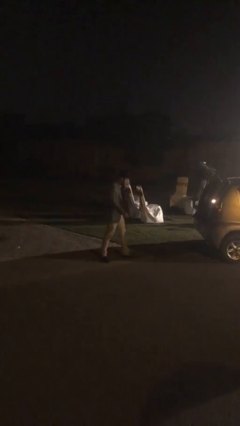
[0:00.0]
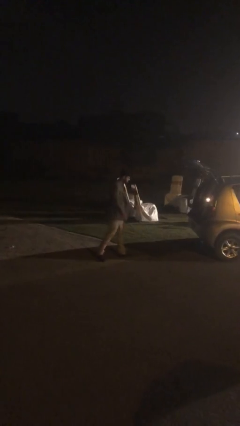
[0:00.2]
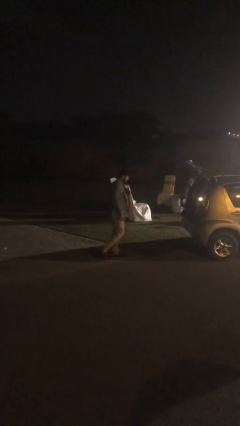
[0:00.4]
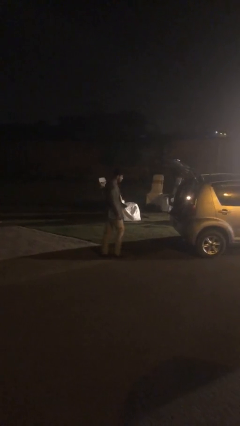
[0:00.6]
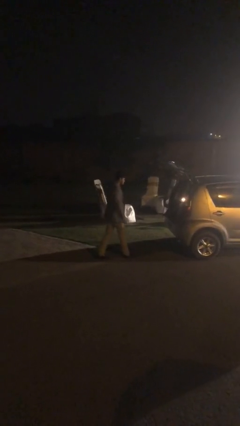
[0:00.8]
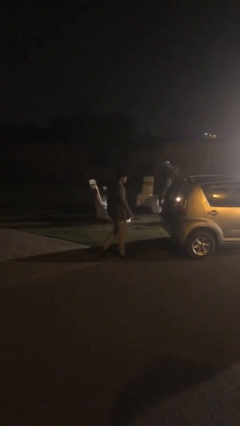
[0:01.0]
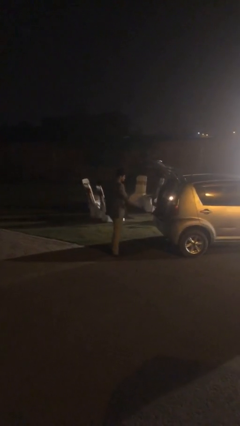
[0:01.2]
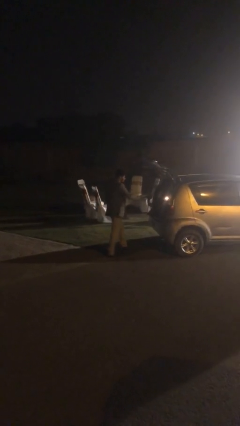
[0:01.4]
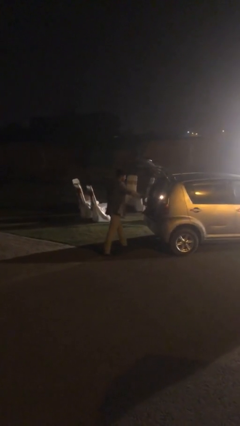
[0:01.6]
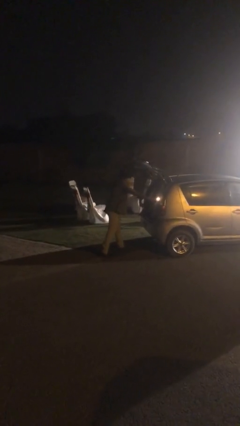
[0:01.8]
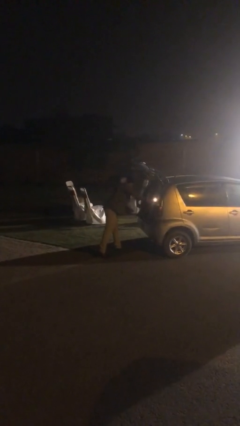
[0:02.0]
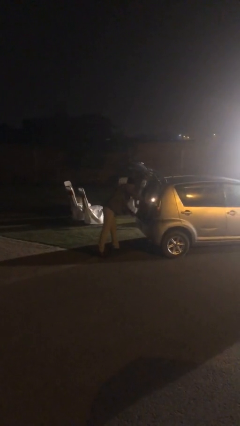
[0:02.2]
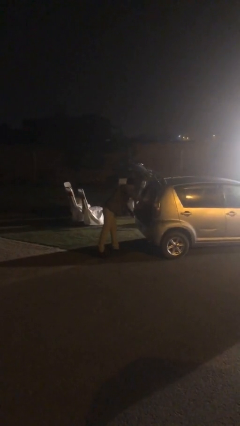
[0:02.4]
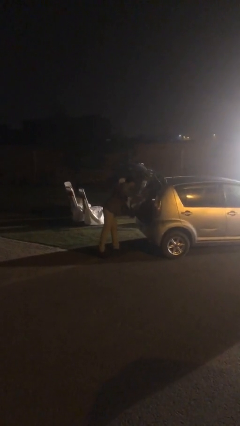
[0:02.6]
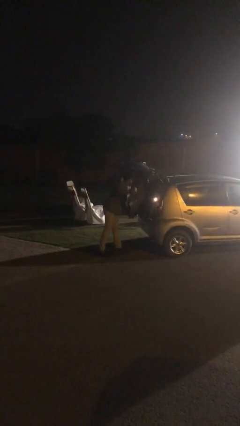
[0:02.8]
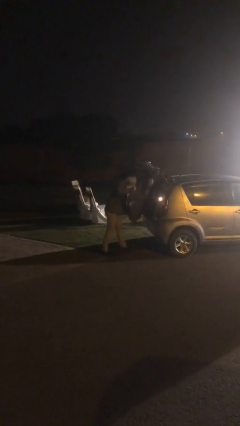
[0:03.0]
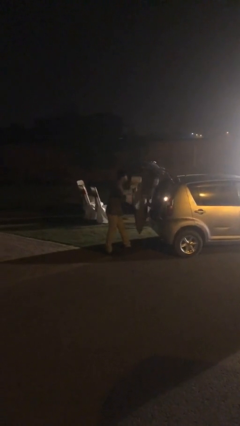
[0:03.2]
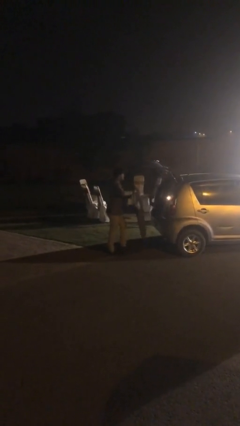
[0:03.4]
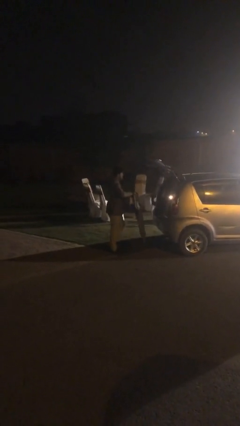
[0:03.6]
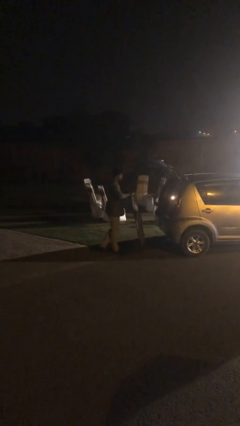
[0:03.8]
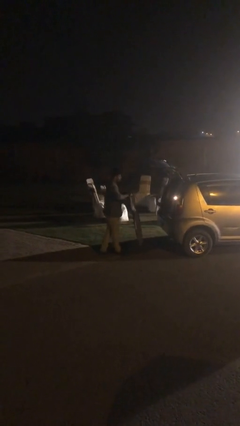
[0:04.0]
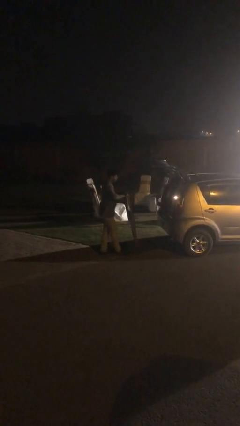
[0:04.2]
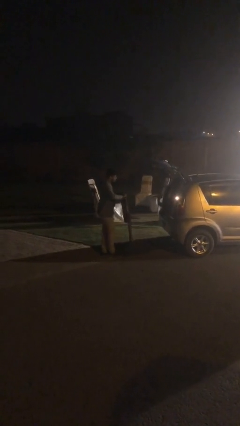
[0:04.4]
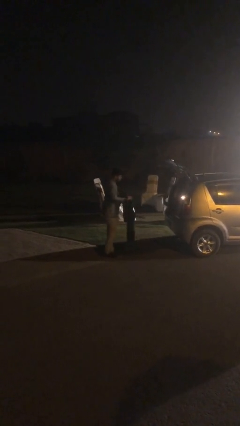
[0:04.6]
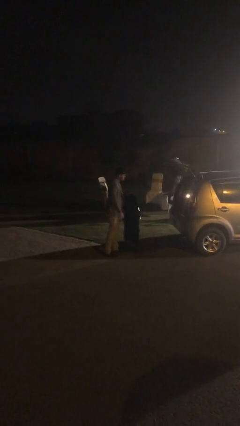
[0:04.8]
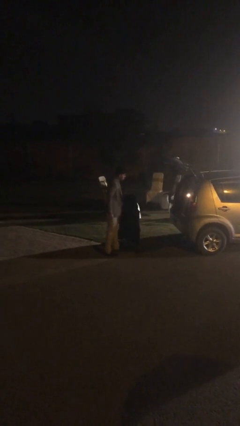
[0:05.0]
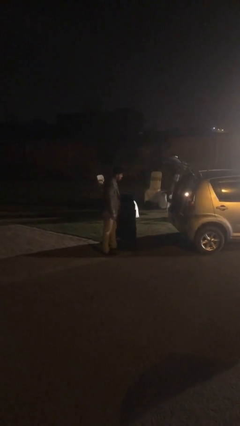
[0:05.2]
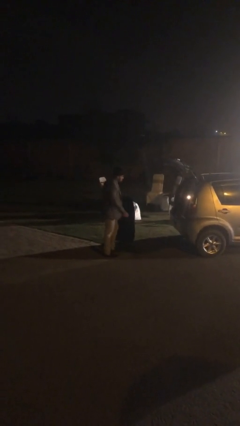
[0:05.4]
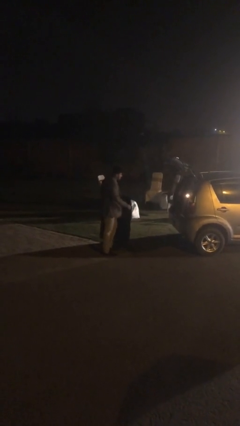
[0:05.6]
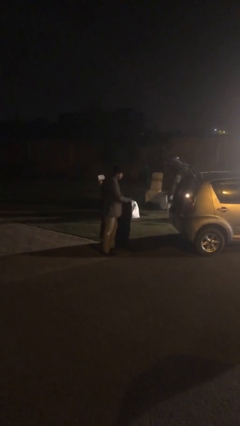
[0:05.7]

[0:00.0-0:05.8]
person unloads car

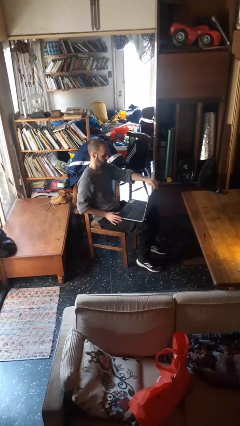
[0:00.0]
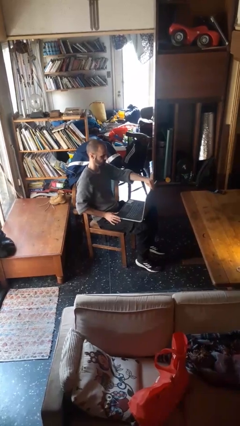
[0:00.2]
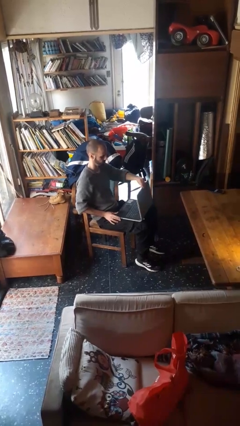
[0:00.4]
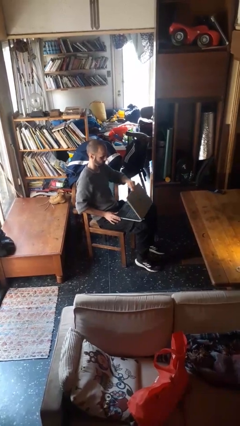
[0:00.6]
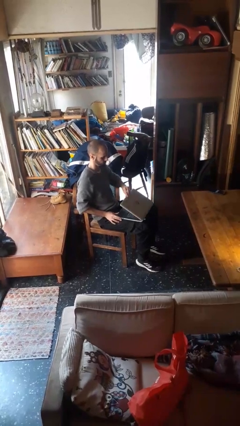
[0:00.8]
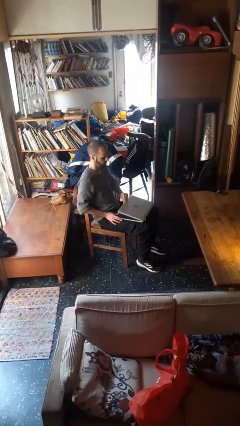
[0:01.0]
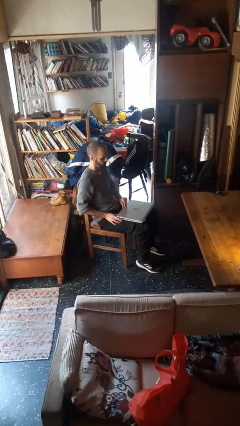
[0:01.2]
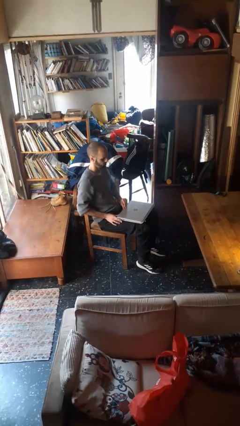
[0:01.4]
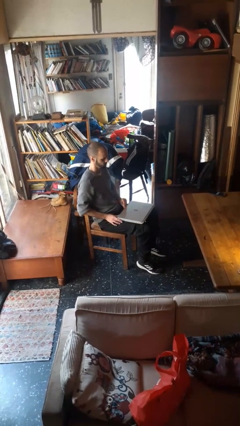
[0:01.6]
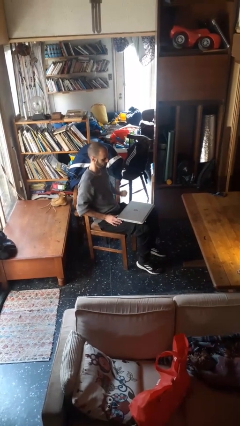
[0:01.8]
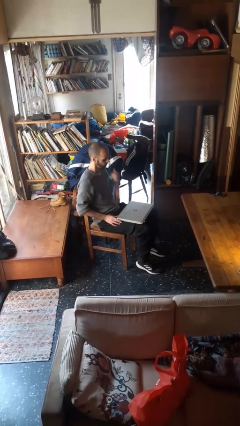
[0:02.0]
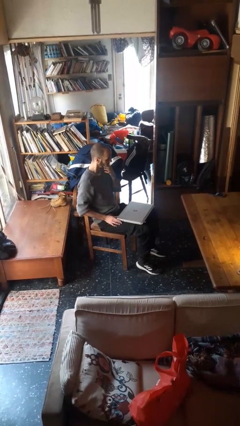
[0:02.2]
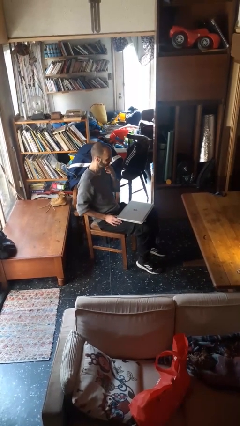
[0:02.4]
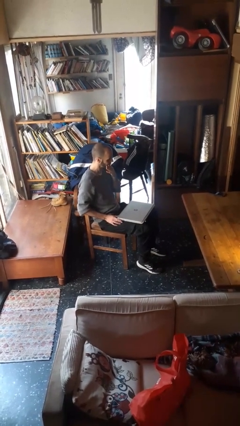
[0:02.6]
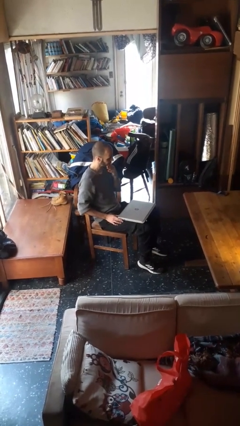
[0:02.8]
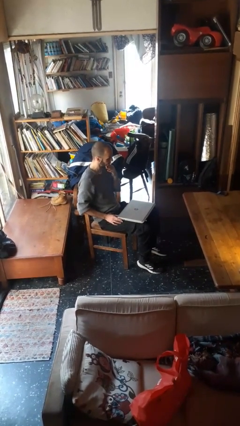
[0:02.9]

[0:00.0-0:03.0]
person closes laptop

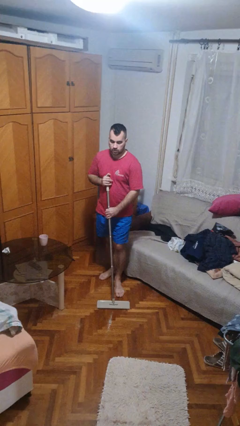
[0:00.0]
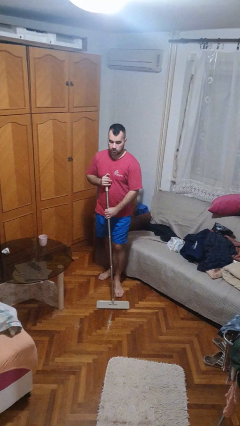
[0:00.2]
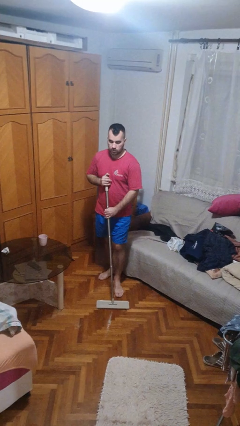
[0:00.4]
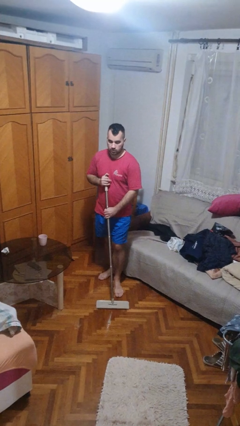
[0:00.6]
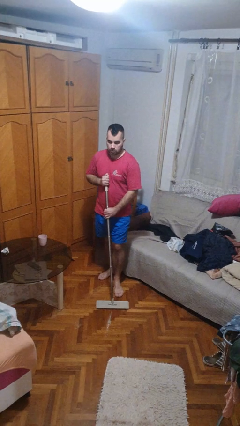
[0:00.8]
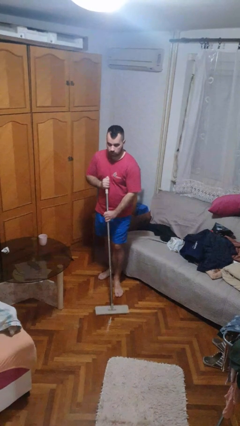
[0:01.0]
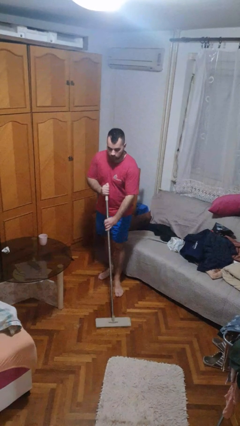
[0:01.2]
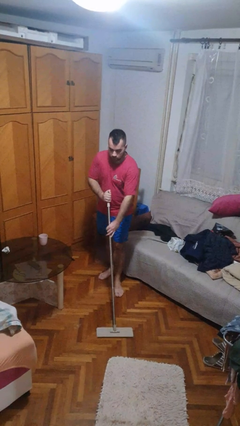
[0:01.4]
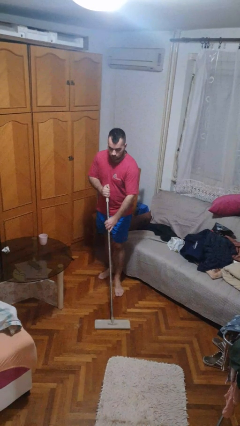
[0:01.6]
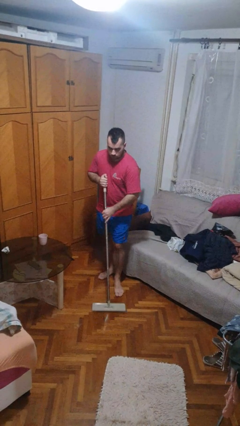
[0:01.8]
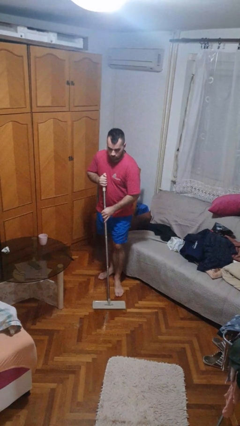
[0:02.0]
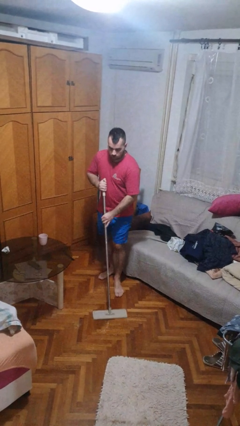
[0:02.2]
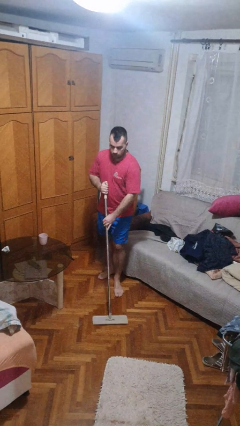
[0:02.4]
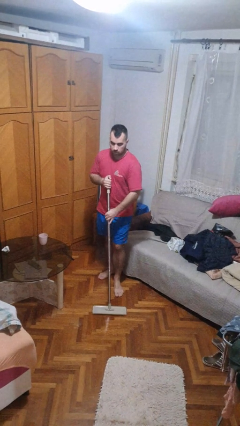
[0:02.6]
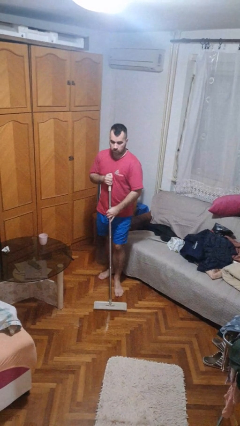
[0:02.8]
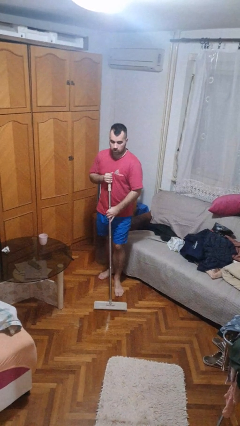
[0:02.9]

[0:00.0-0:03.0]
person mops

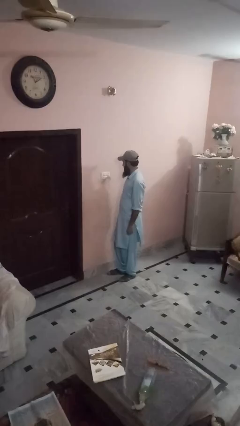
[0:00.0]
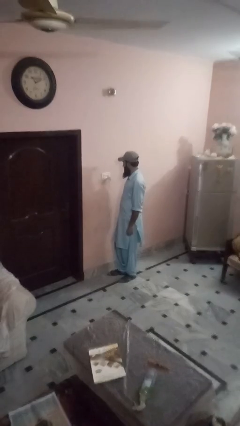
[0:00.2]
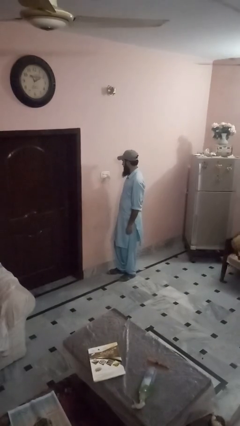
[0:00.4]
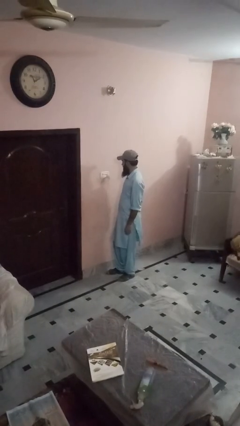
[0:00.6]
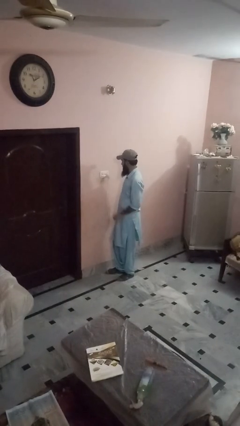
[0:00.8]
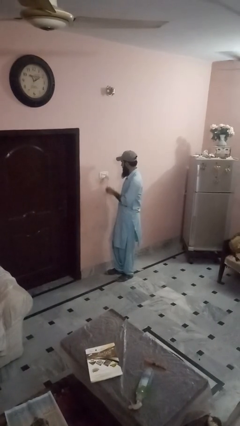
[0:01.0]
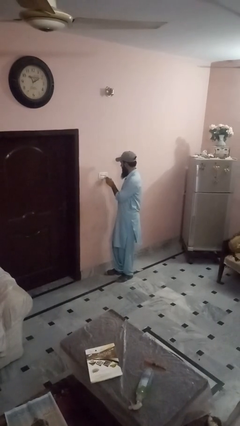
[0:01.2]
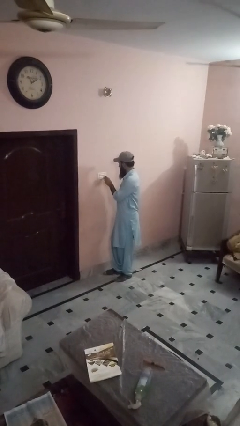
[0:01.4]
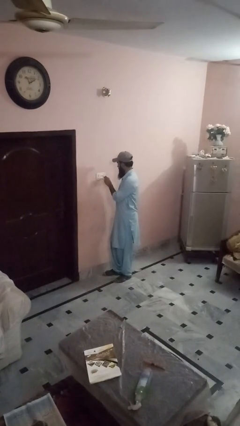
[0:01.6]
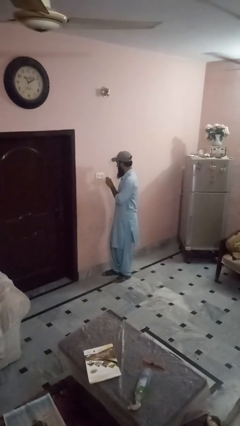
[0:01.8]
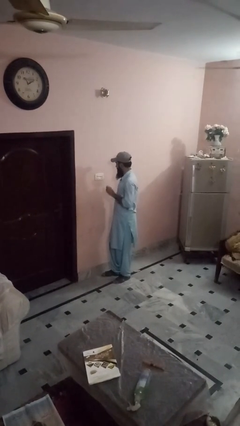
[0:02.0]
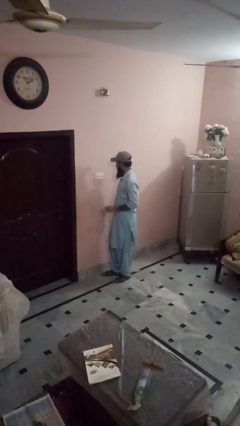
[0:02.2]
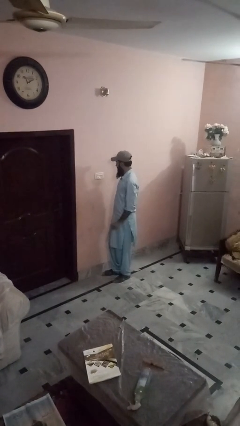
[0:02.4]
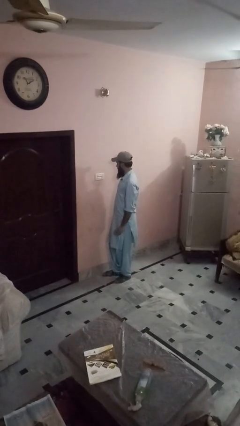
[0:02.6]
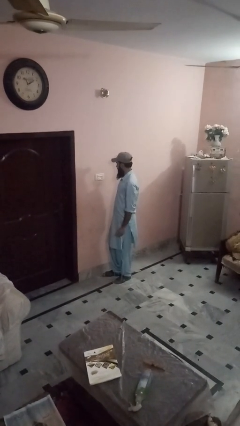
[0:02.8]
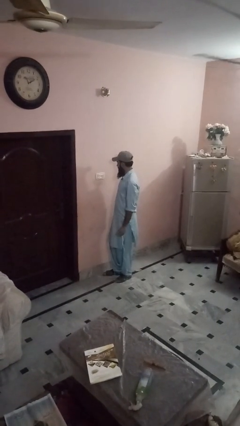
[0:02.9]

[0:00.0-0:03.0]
person unplugs from electrical socket

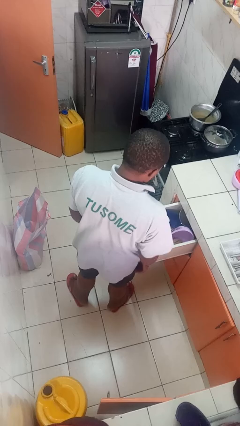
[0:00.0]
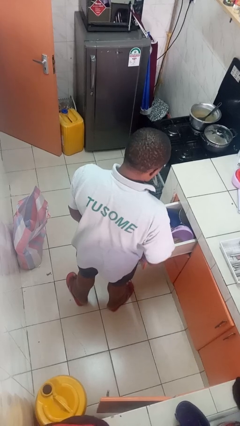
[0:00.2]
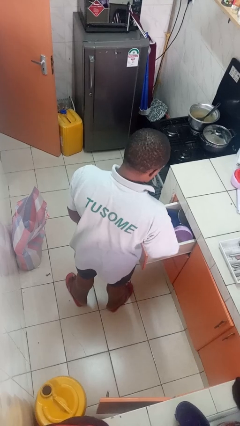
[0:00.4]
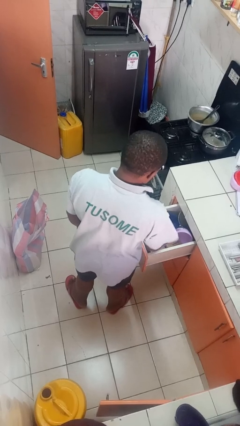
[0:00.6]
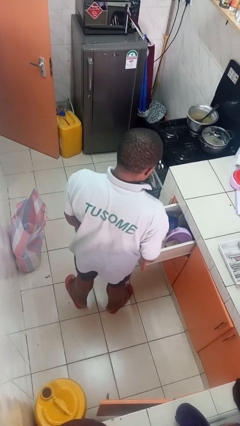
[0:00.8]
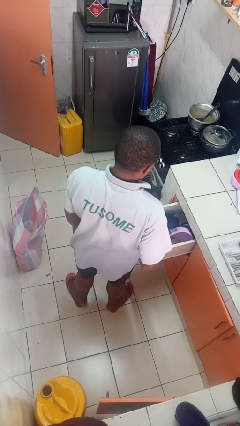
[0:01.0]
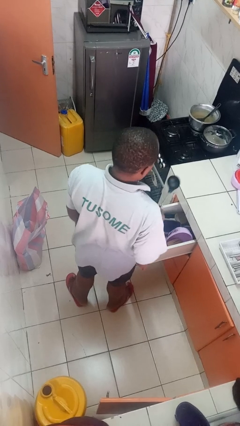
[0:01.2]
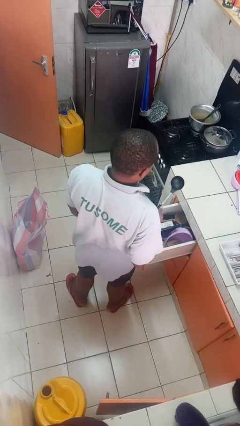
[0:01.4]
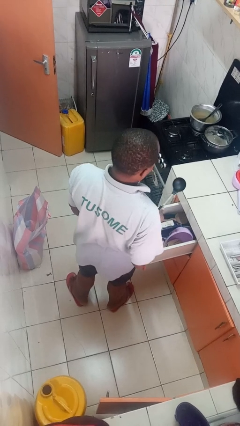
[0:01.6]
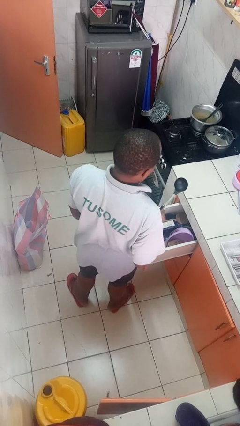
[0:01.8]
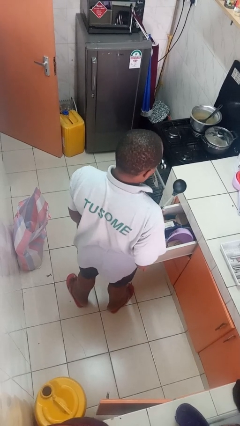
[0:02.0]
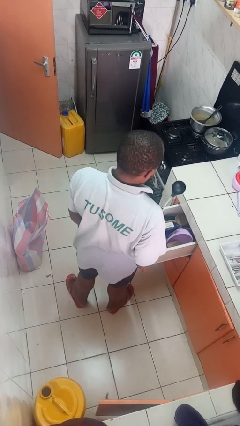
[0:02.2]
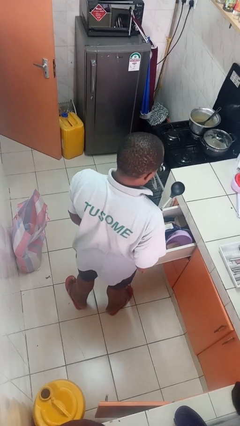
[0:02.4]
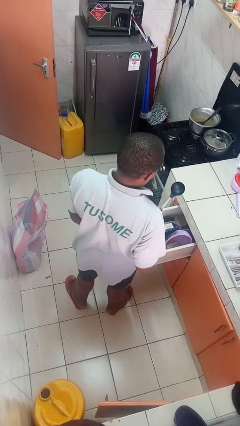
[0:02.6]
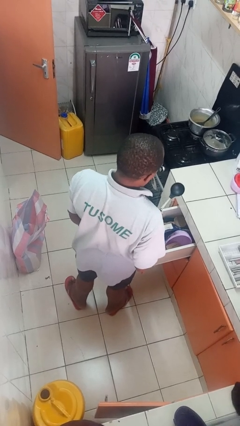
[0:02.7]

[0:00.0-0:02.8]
person takes object from kitchen drawer
